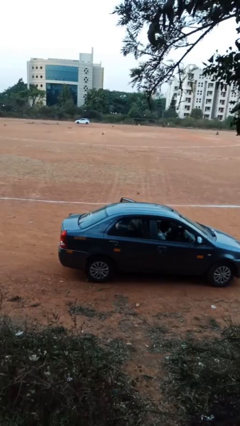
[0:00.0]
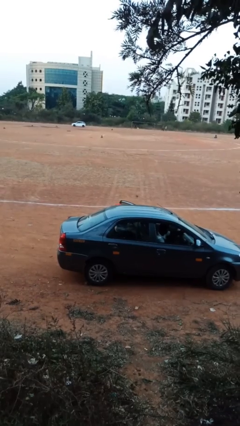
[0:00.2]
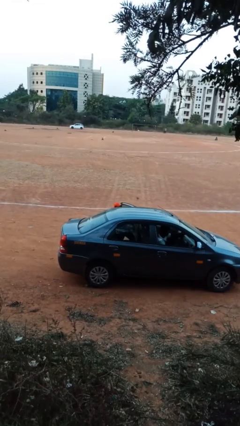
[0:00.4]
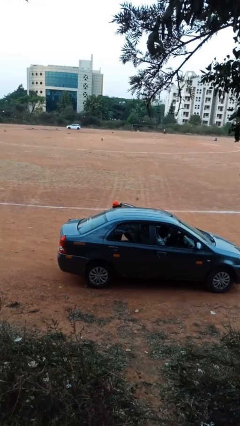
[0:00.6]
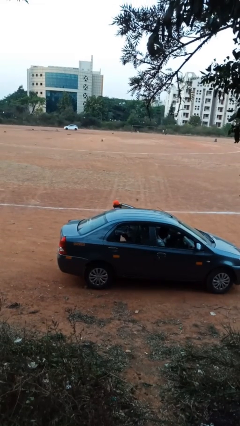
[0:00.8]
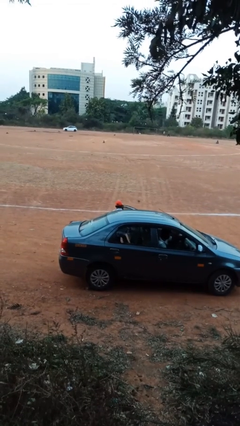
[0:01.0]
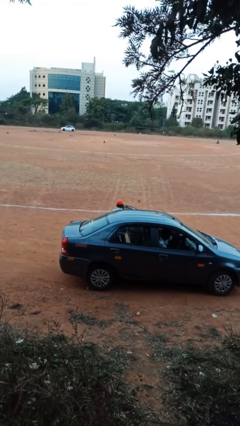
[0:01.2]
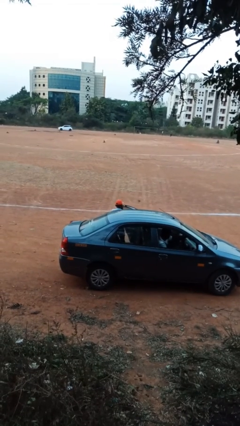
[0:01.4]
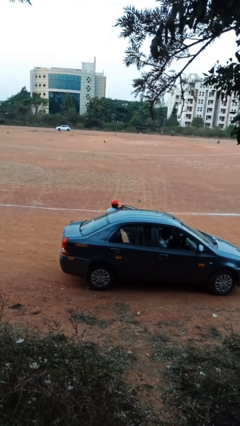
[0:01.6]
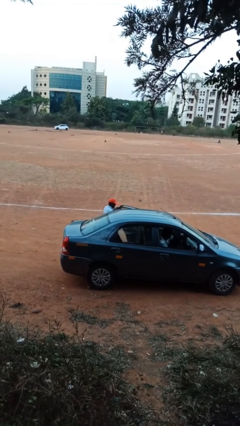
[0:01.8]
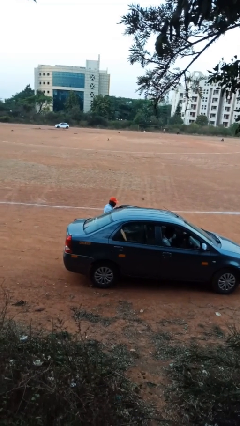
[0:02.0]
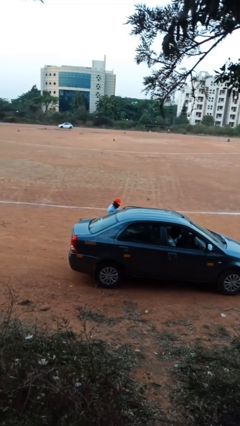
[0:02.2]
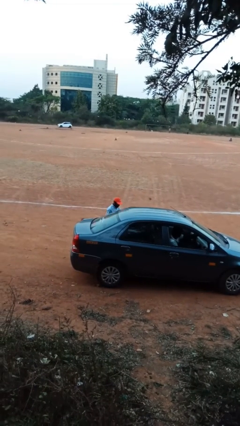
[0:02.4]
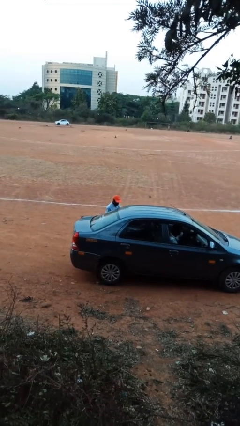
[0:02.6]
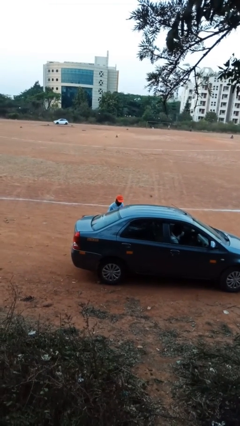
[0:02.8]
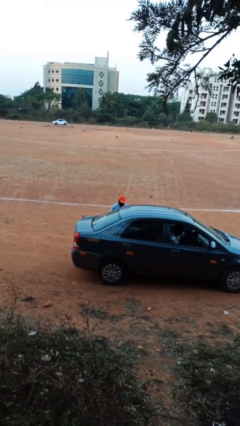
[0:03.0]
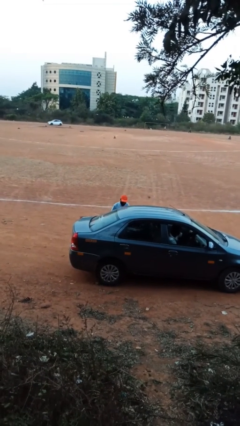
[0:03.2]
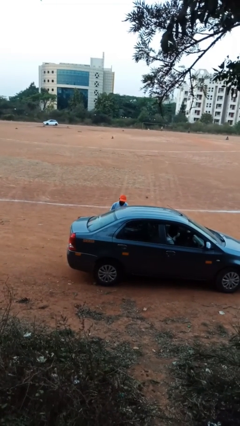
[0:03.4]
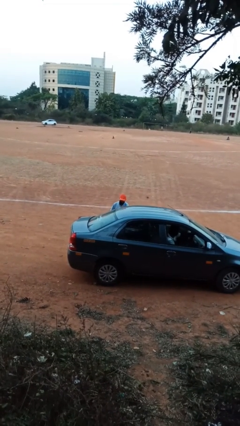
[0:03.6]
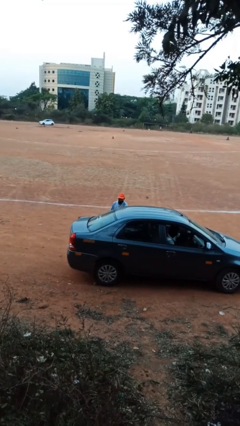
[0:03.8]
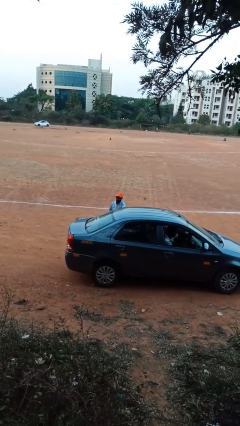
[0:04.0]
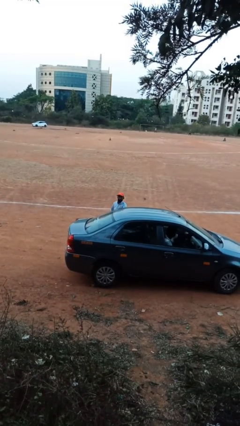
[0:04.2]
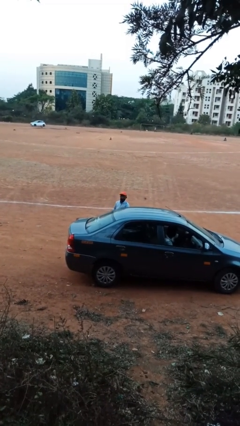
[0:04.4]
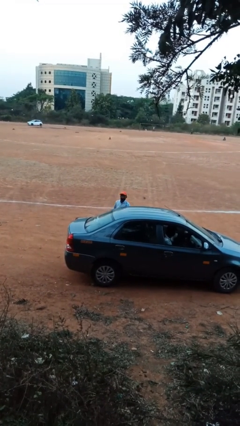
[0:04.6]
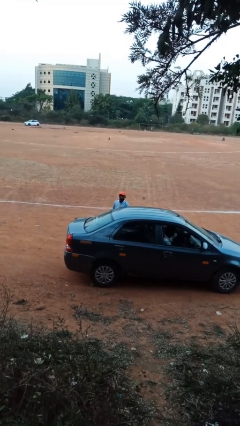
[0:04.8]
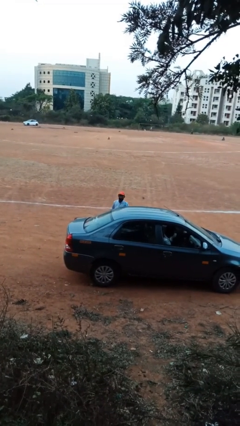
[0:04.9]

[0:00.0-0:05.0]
person exits car

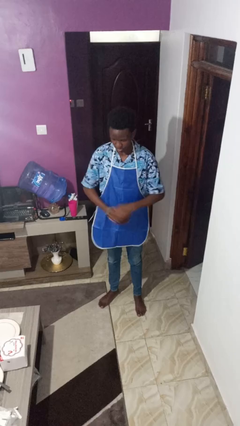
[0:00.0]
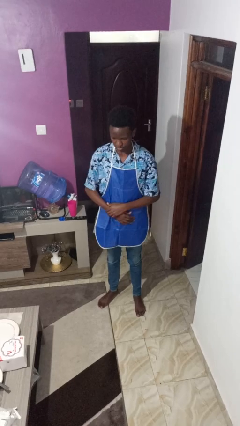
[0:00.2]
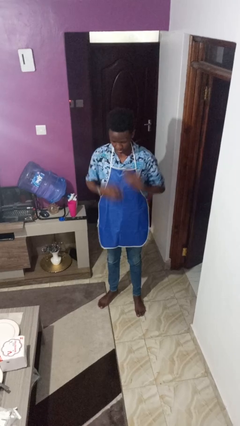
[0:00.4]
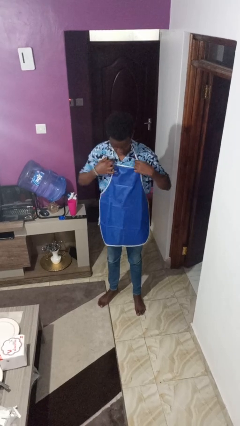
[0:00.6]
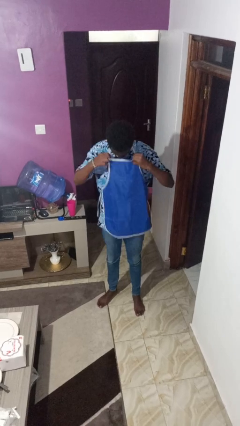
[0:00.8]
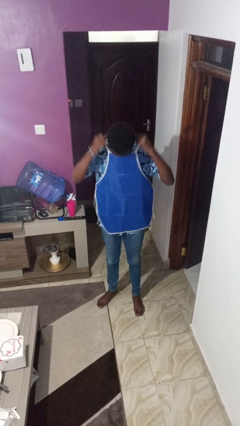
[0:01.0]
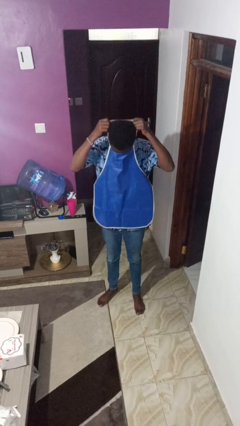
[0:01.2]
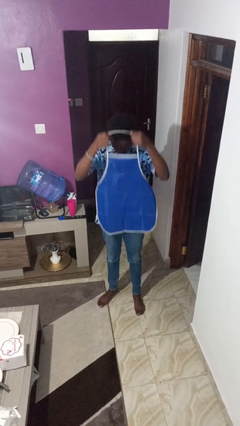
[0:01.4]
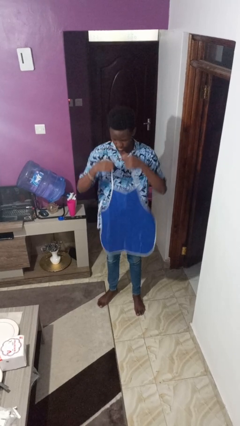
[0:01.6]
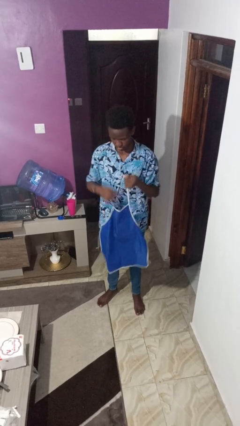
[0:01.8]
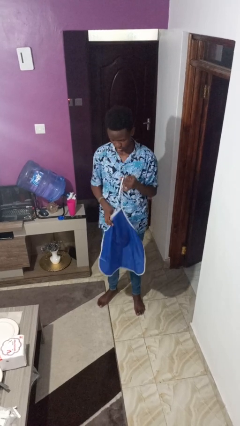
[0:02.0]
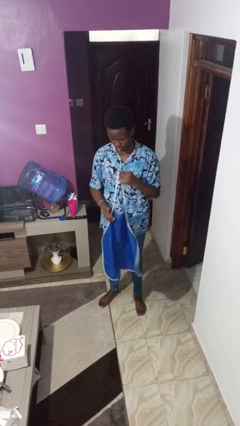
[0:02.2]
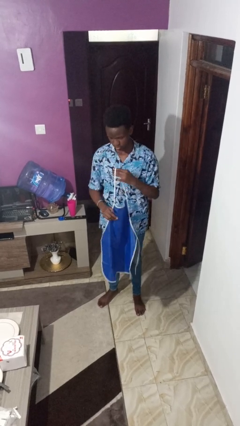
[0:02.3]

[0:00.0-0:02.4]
person takes off apron

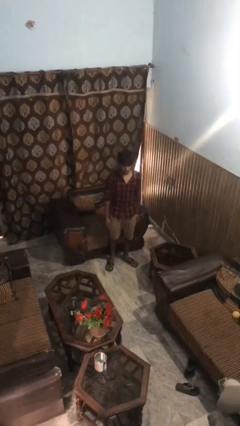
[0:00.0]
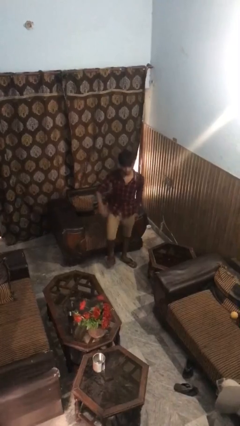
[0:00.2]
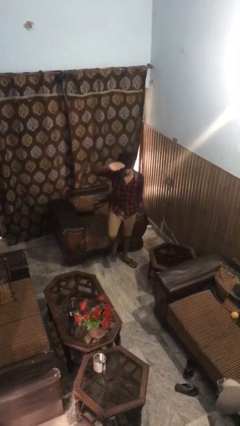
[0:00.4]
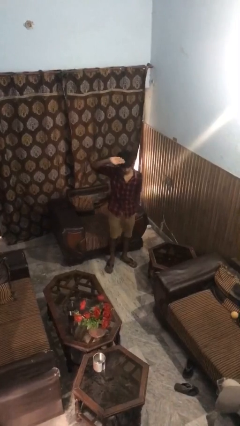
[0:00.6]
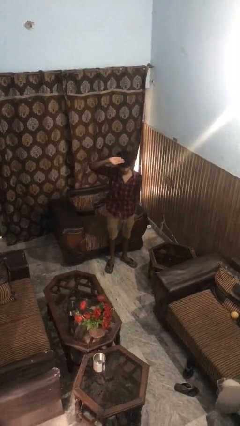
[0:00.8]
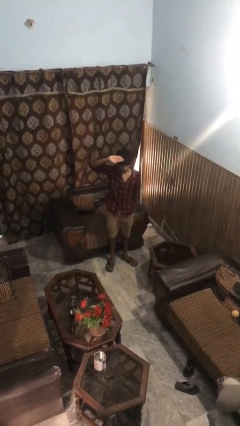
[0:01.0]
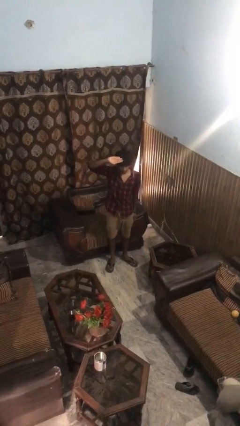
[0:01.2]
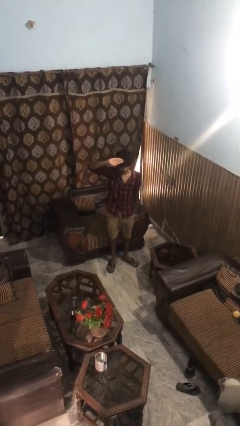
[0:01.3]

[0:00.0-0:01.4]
person salutes

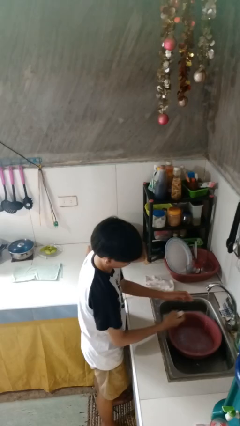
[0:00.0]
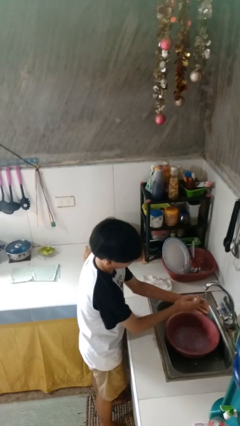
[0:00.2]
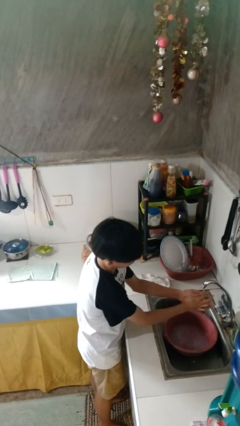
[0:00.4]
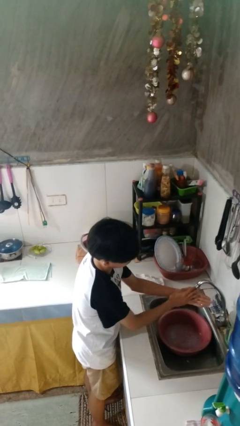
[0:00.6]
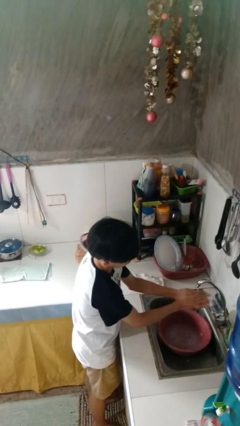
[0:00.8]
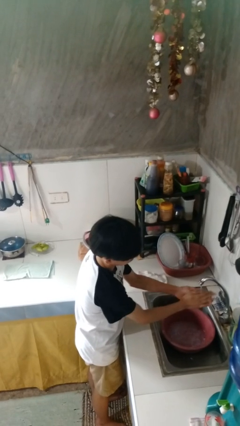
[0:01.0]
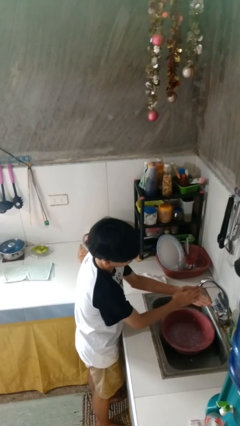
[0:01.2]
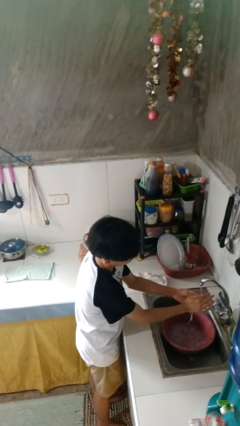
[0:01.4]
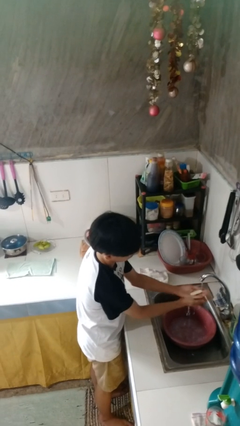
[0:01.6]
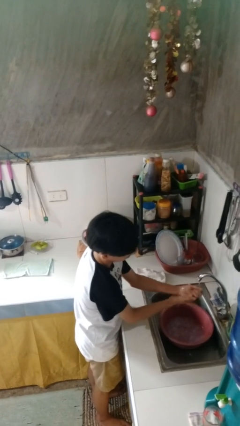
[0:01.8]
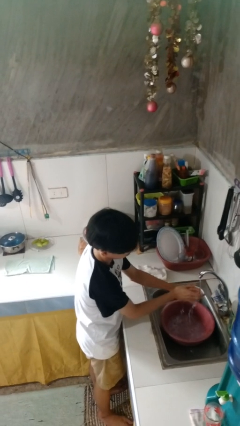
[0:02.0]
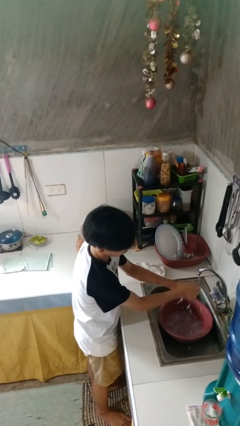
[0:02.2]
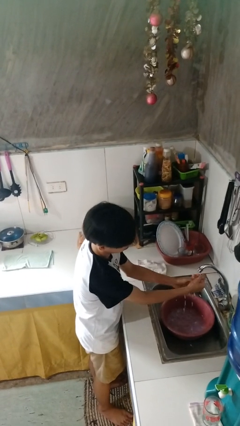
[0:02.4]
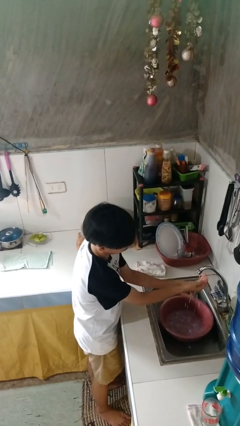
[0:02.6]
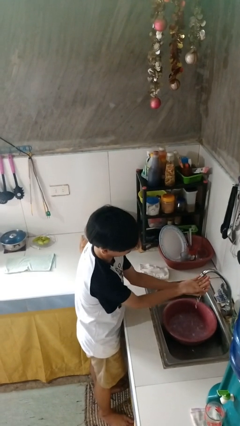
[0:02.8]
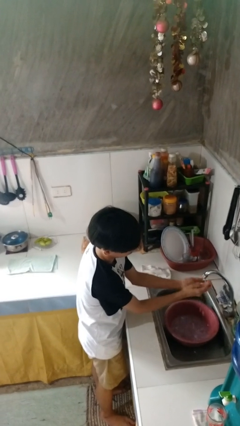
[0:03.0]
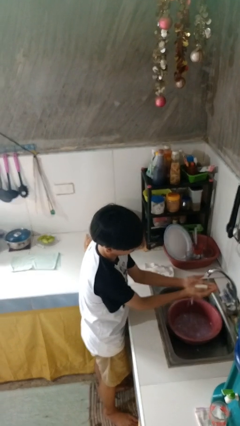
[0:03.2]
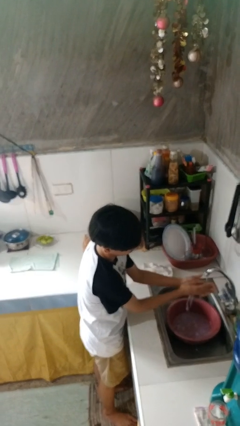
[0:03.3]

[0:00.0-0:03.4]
person washes hands

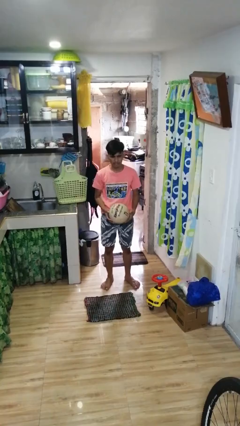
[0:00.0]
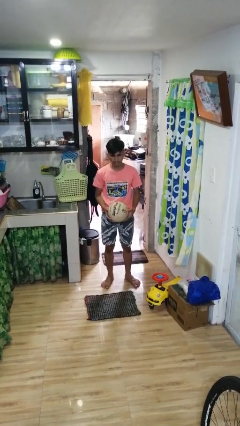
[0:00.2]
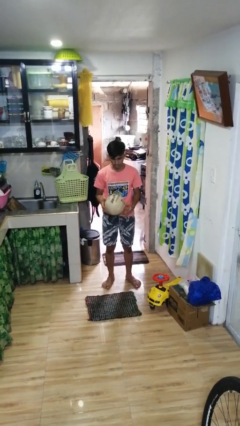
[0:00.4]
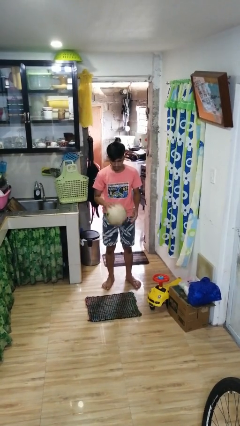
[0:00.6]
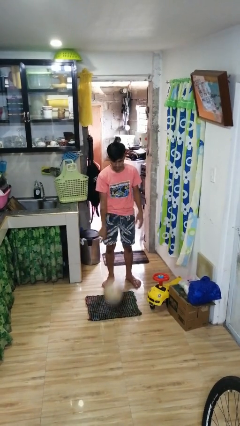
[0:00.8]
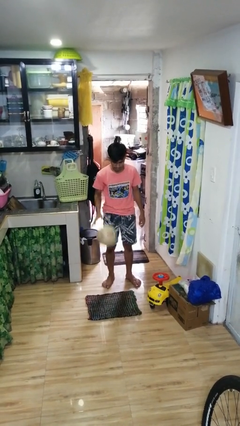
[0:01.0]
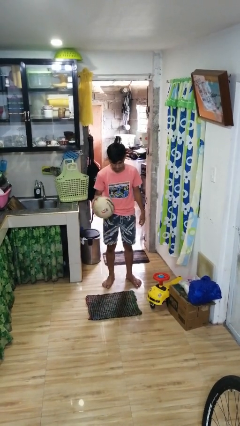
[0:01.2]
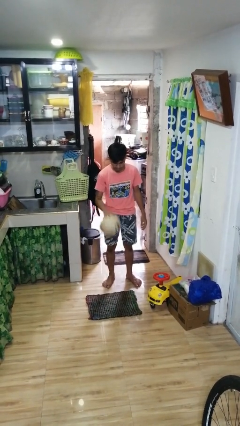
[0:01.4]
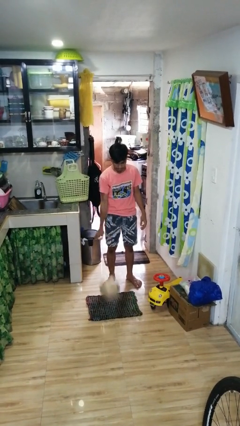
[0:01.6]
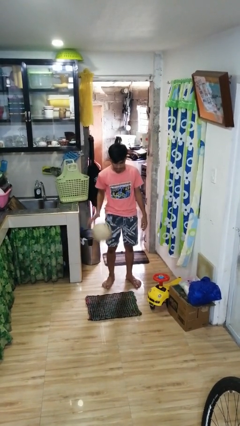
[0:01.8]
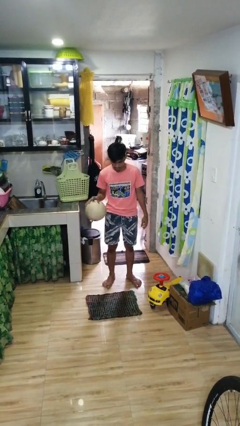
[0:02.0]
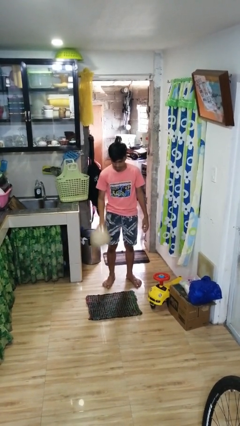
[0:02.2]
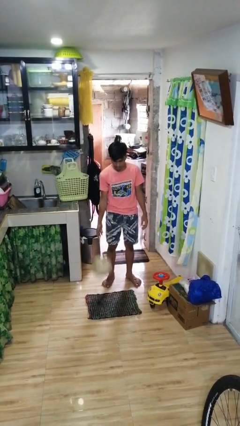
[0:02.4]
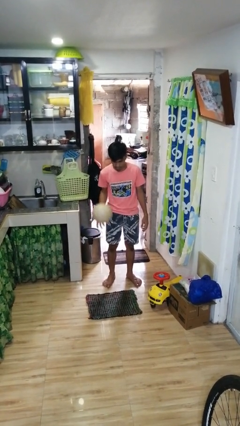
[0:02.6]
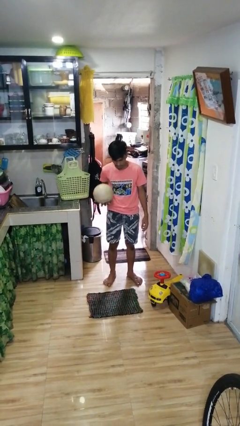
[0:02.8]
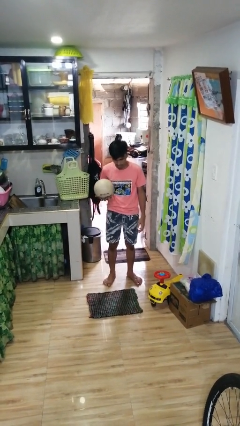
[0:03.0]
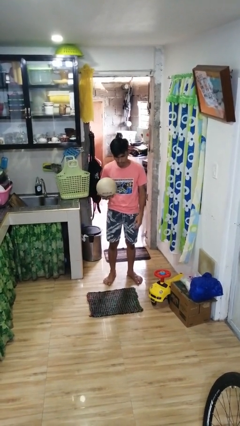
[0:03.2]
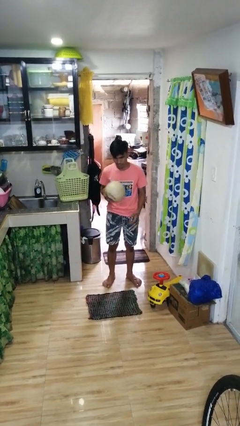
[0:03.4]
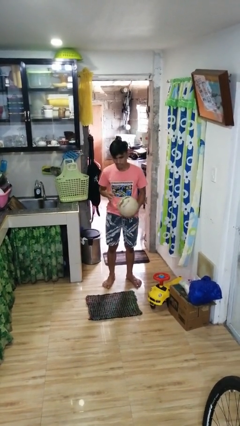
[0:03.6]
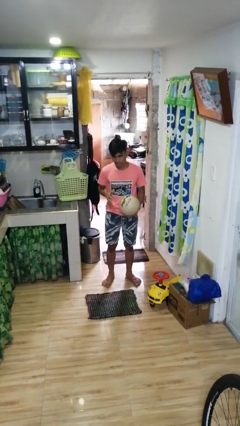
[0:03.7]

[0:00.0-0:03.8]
person bounces ball on floor

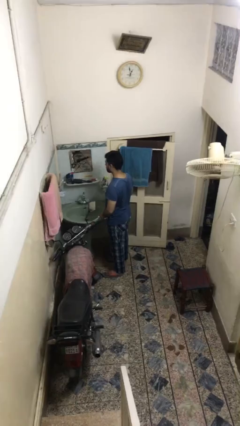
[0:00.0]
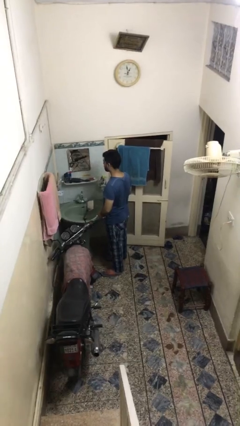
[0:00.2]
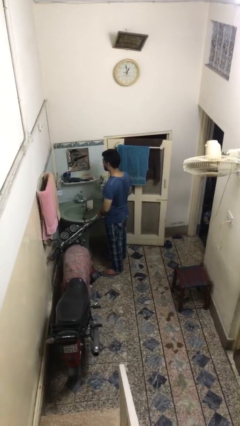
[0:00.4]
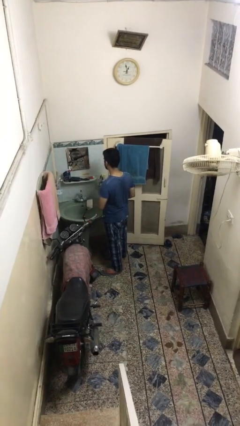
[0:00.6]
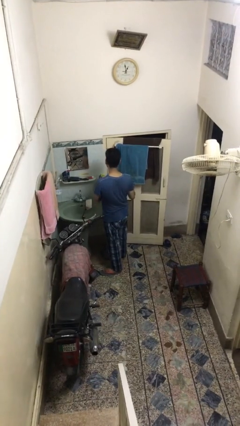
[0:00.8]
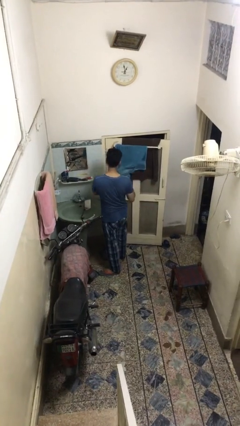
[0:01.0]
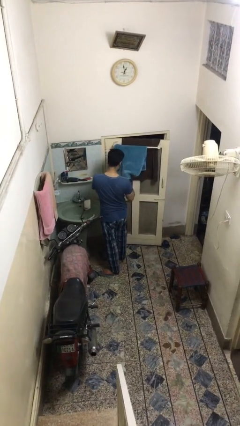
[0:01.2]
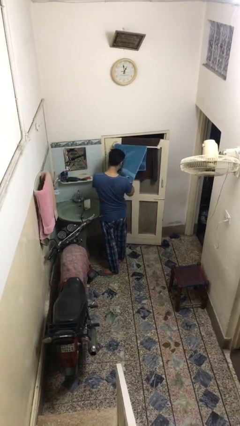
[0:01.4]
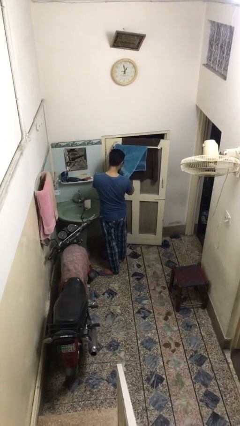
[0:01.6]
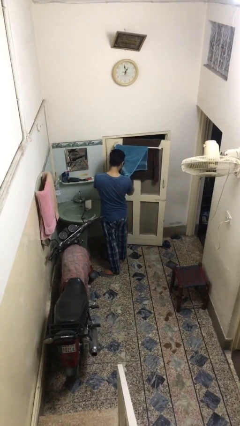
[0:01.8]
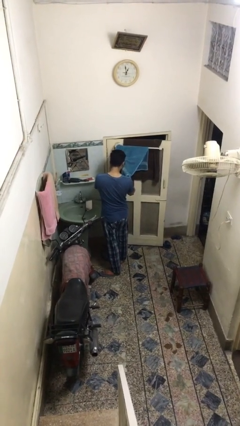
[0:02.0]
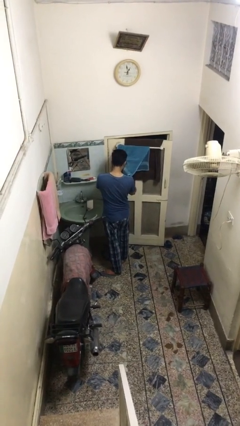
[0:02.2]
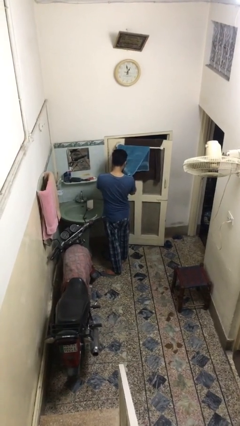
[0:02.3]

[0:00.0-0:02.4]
person dries face with towel
